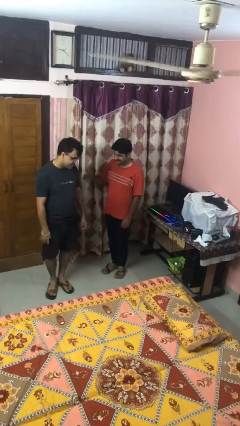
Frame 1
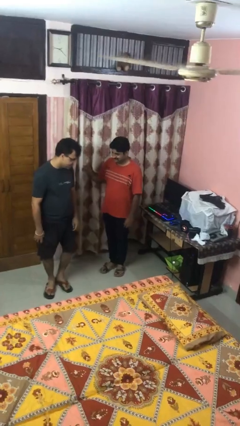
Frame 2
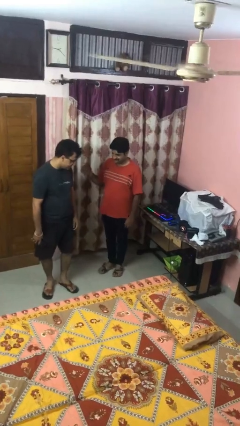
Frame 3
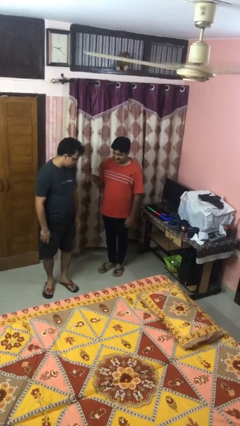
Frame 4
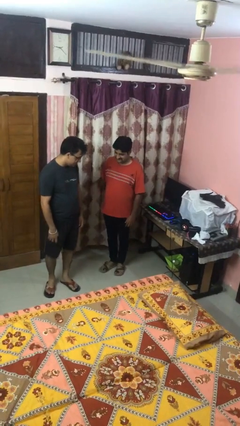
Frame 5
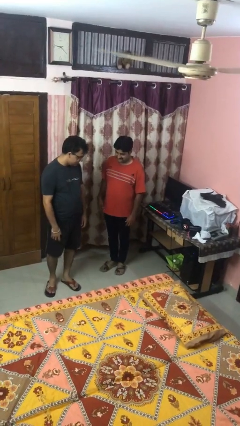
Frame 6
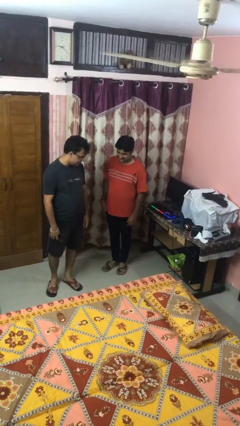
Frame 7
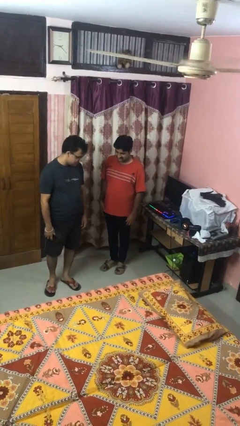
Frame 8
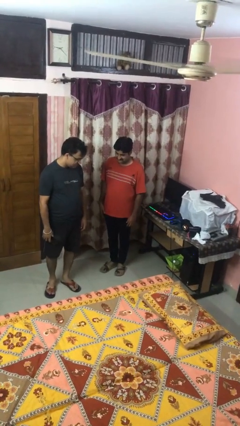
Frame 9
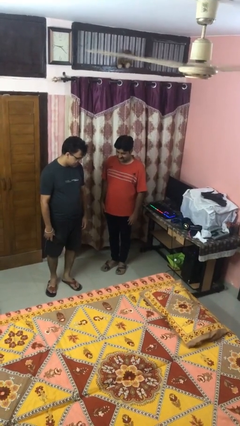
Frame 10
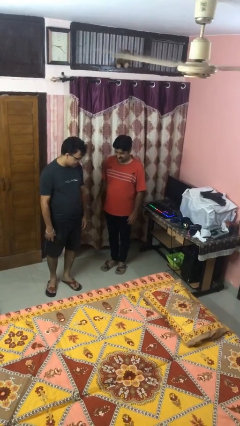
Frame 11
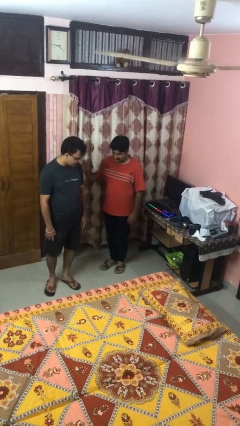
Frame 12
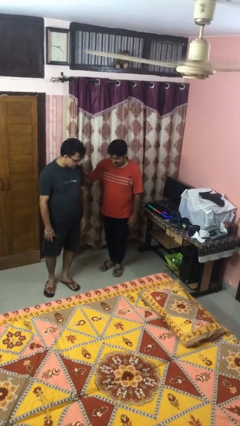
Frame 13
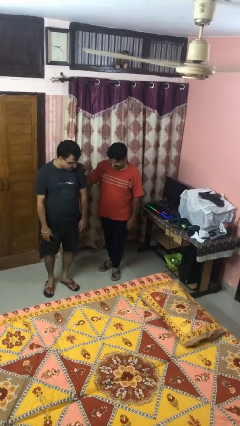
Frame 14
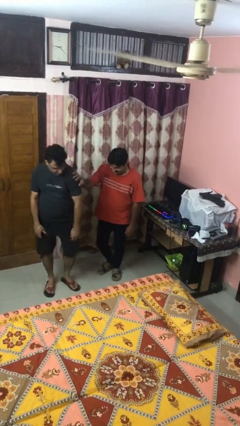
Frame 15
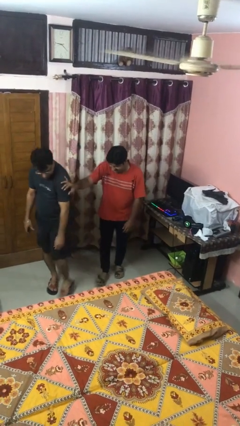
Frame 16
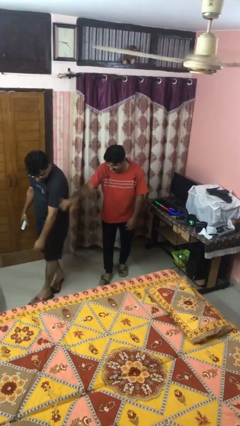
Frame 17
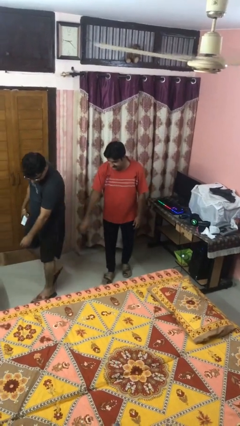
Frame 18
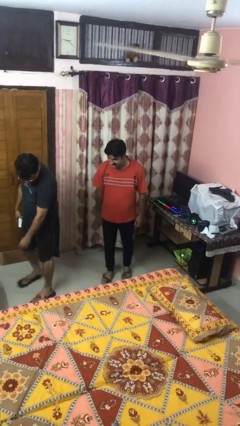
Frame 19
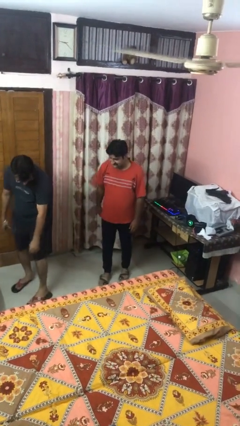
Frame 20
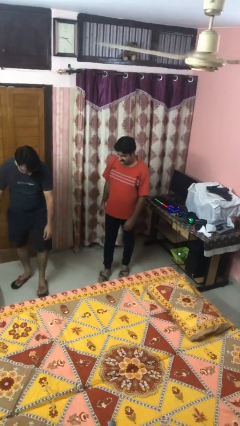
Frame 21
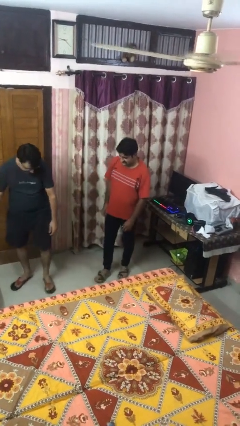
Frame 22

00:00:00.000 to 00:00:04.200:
person shoves person

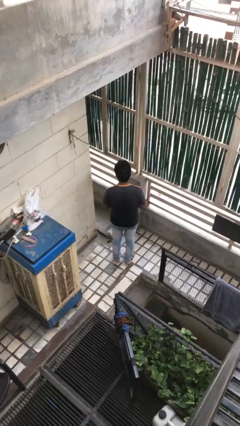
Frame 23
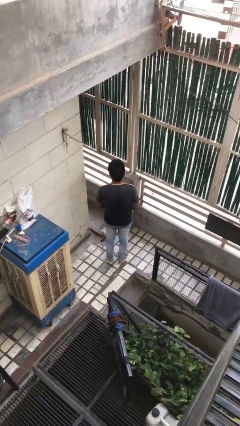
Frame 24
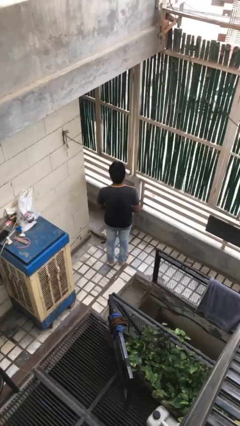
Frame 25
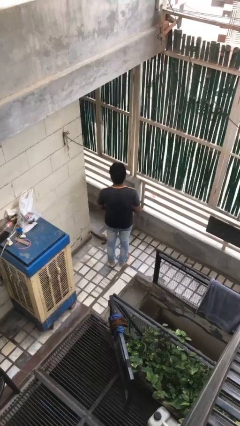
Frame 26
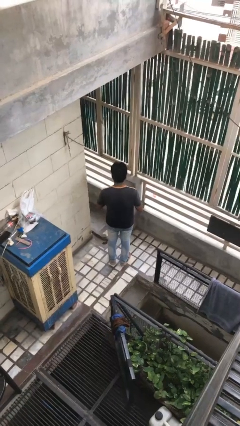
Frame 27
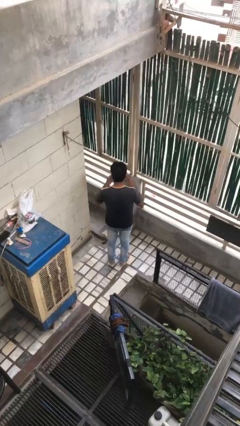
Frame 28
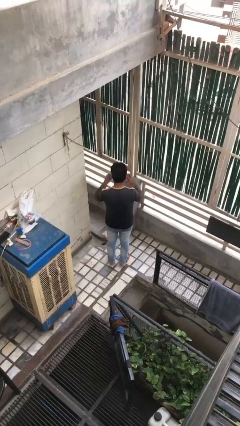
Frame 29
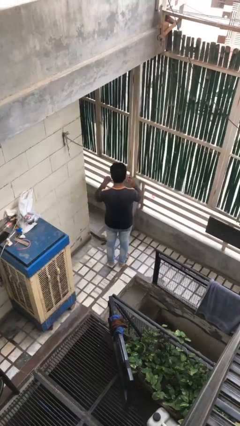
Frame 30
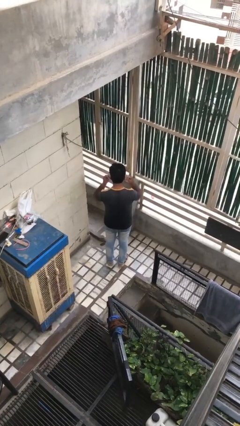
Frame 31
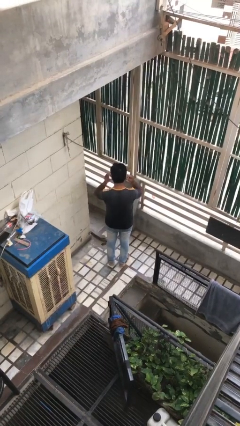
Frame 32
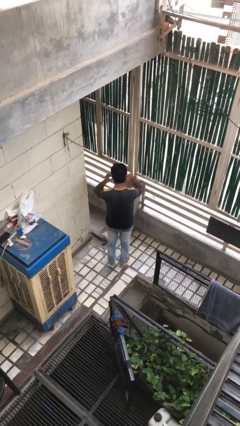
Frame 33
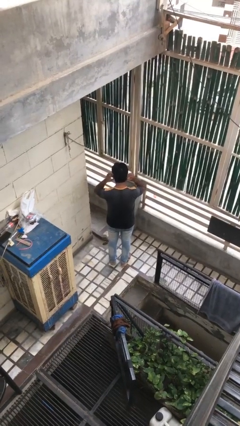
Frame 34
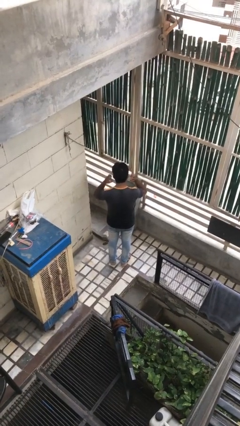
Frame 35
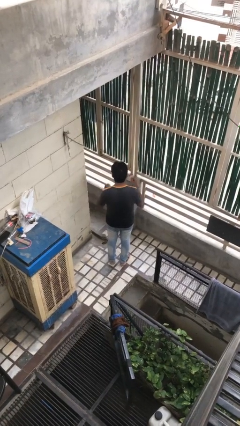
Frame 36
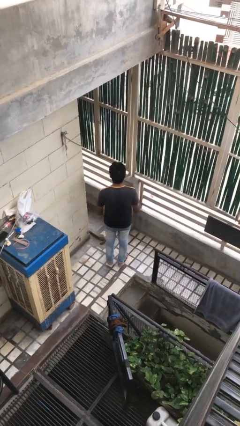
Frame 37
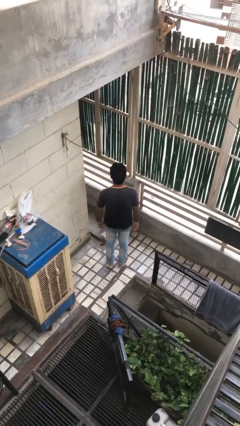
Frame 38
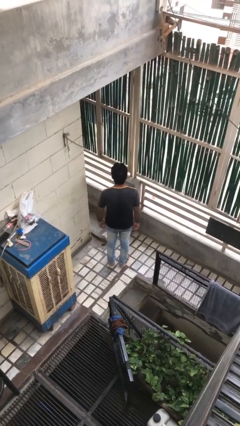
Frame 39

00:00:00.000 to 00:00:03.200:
person puts on facemask

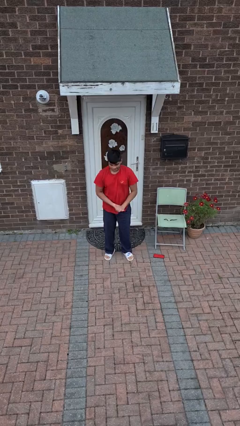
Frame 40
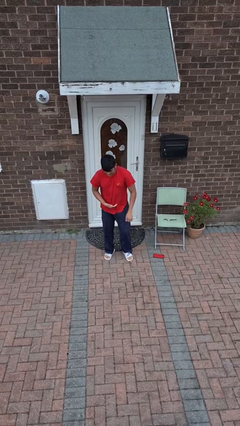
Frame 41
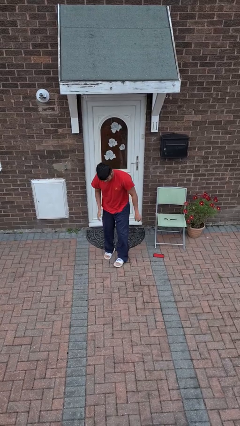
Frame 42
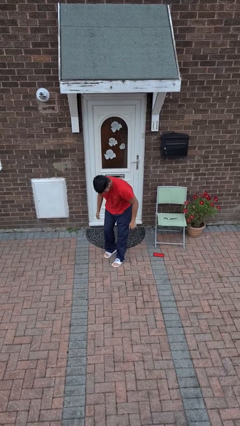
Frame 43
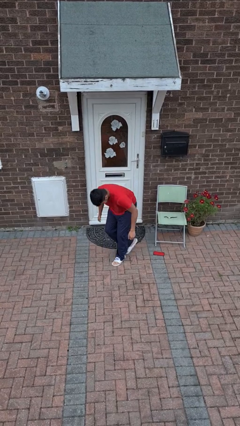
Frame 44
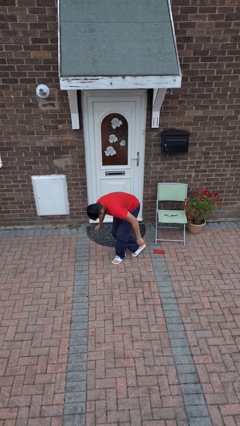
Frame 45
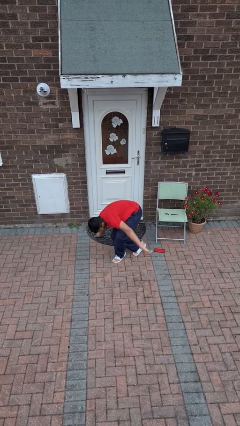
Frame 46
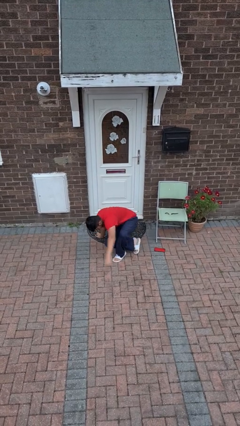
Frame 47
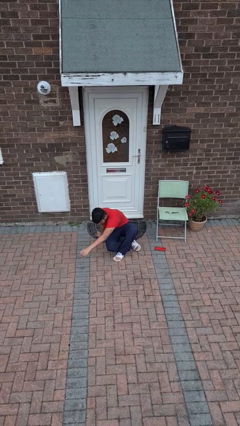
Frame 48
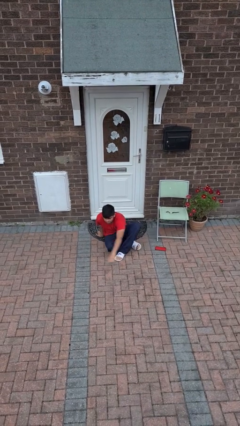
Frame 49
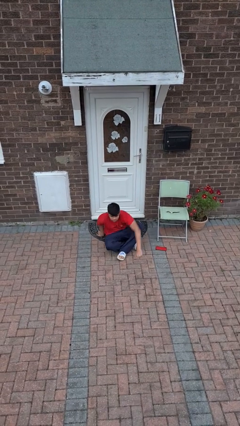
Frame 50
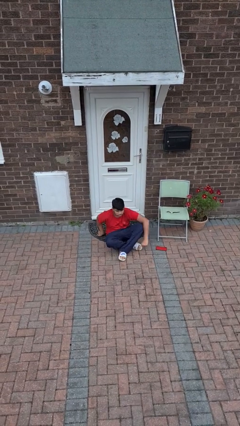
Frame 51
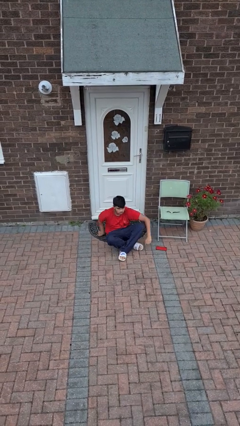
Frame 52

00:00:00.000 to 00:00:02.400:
person sits crisscross

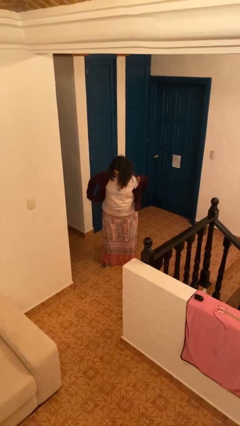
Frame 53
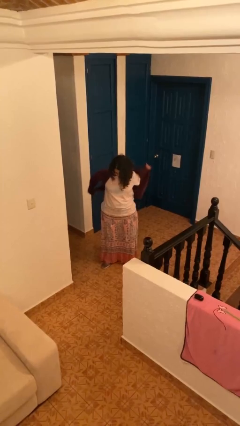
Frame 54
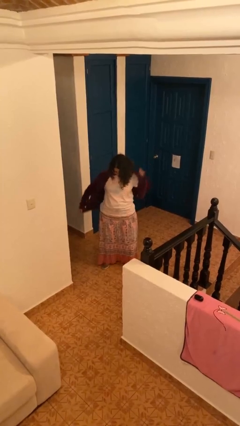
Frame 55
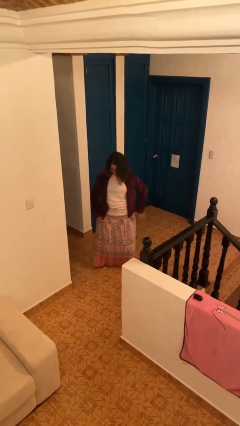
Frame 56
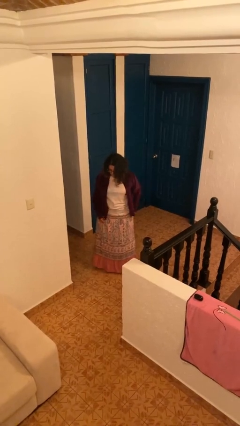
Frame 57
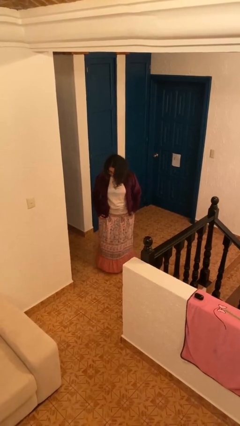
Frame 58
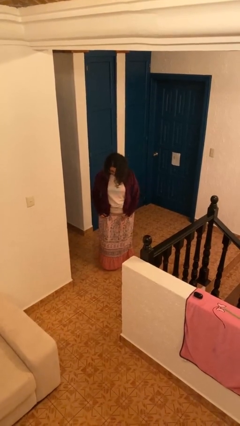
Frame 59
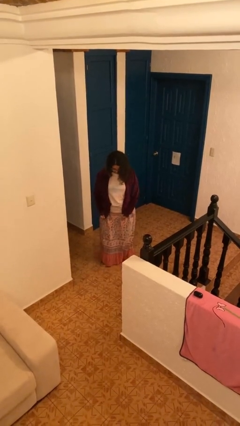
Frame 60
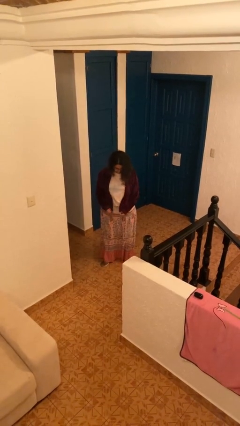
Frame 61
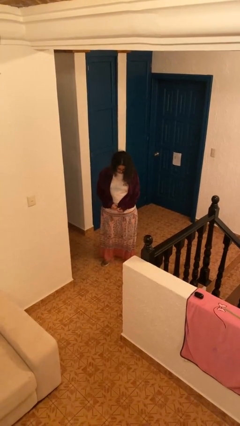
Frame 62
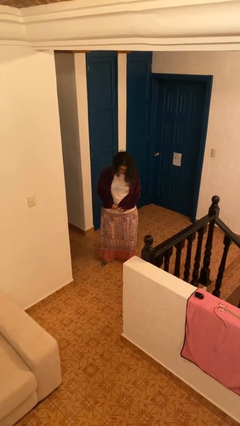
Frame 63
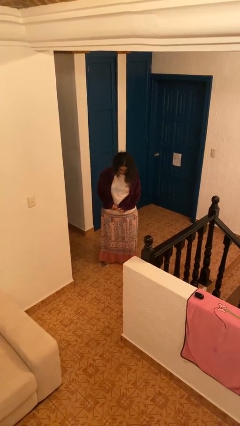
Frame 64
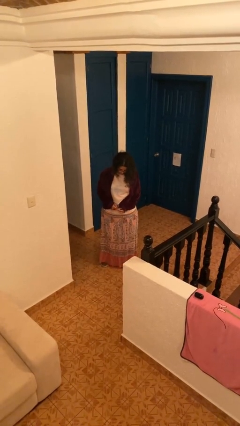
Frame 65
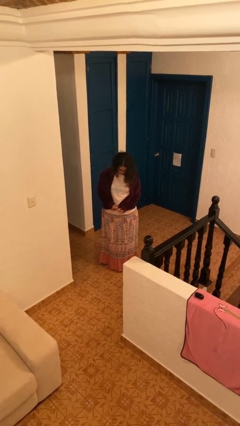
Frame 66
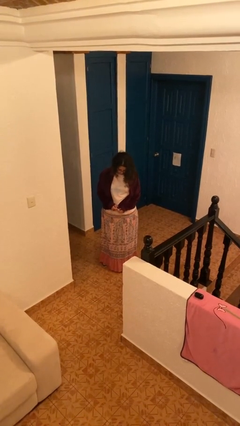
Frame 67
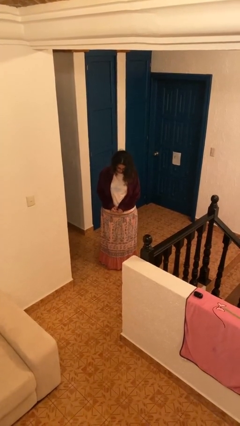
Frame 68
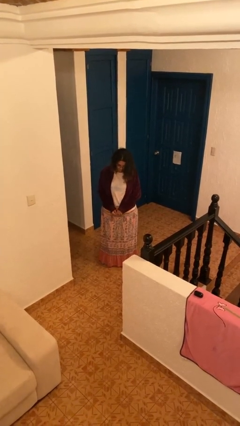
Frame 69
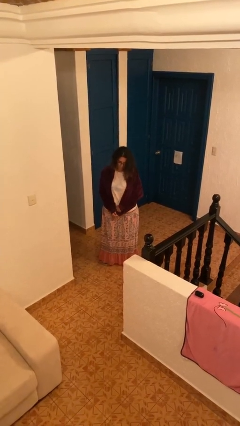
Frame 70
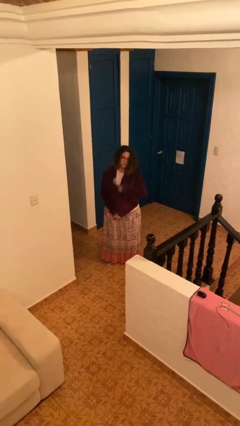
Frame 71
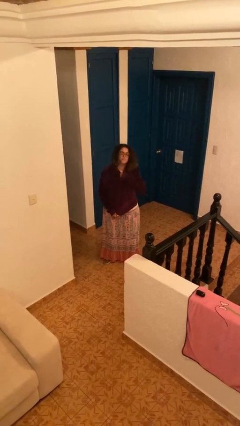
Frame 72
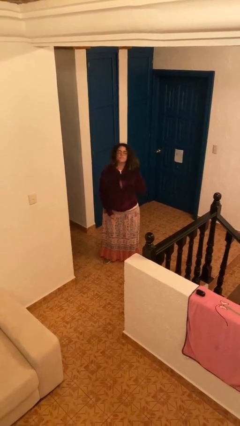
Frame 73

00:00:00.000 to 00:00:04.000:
person zips up jacket

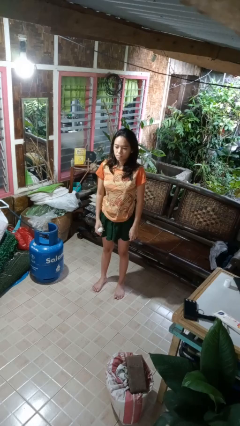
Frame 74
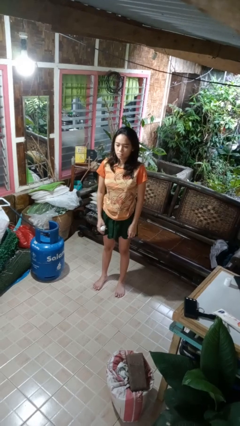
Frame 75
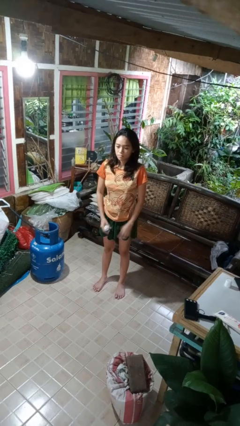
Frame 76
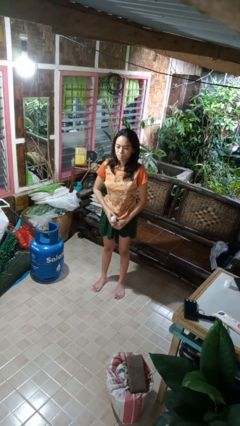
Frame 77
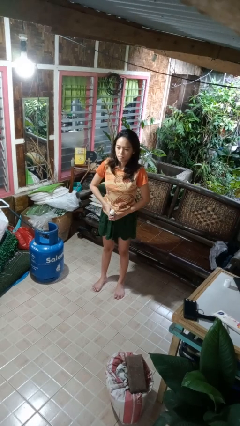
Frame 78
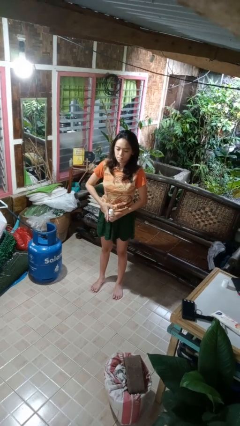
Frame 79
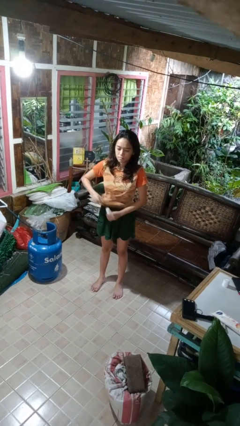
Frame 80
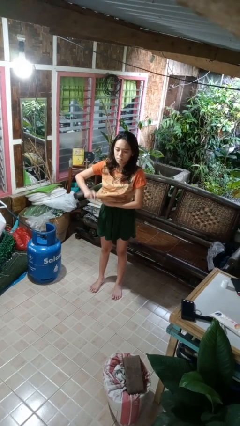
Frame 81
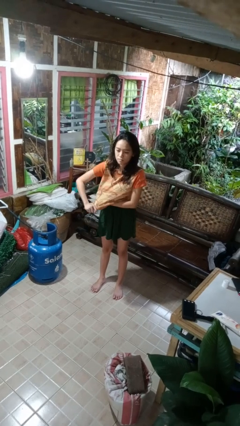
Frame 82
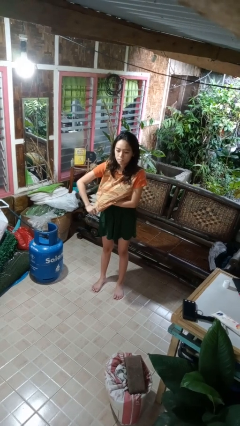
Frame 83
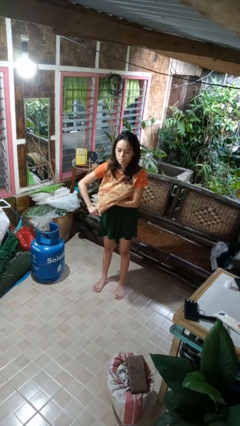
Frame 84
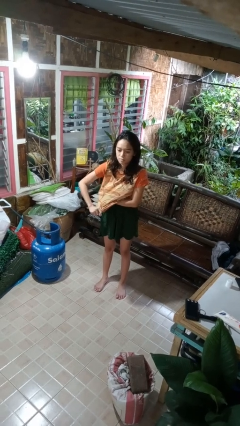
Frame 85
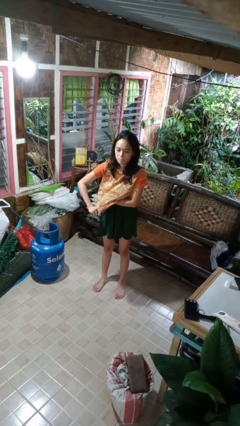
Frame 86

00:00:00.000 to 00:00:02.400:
person applies deodorant

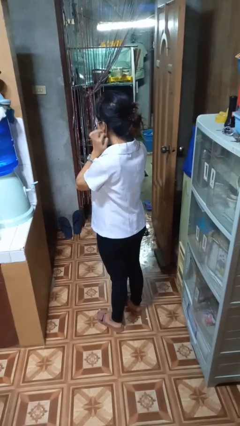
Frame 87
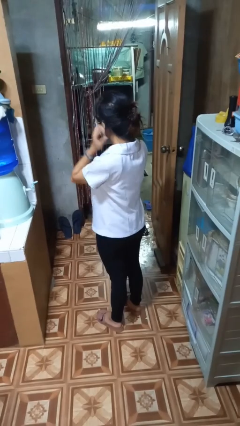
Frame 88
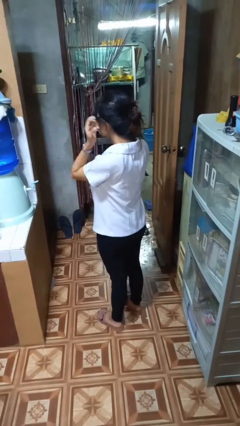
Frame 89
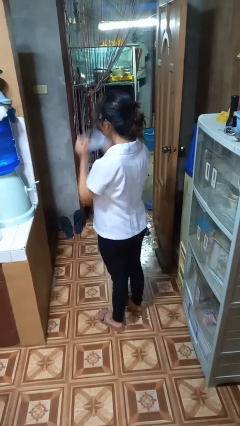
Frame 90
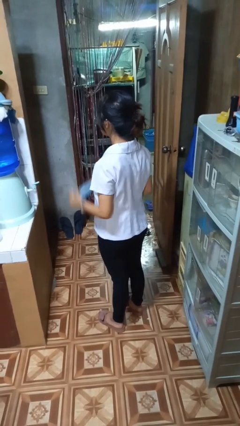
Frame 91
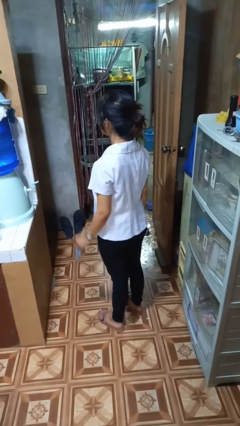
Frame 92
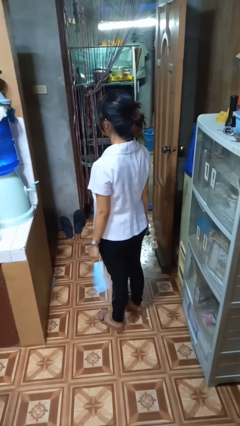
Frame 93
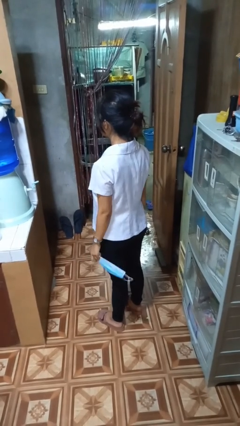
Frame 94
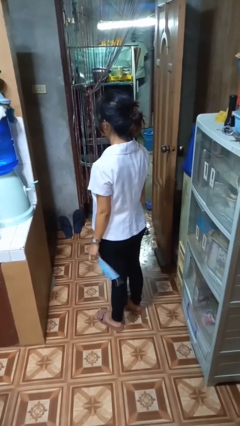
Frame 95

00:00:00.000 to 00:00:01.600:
person takes off facemask
